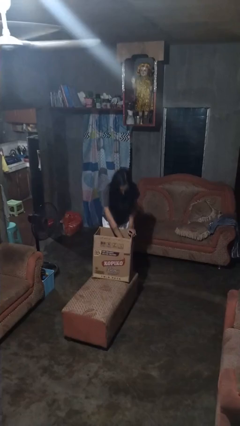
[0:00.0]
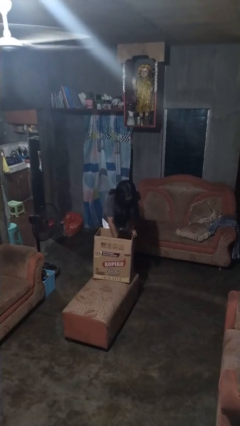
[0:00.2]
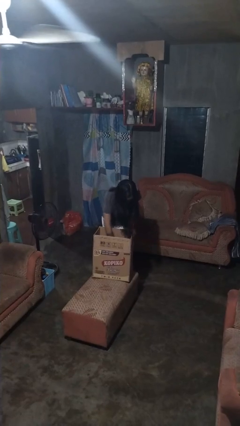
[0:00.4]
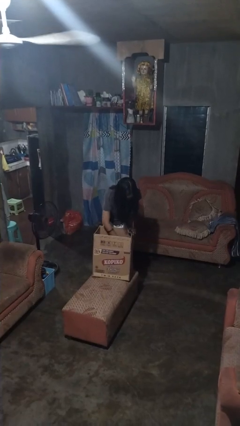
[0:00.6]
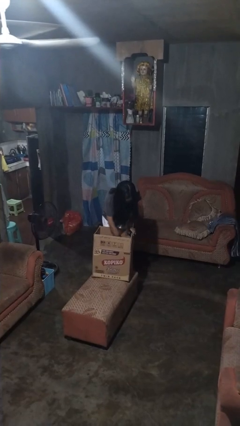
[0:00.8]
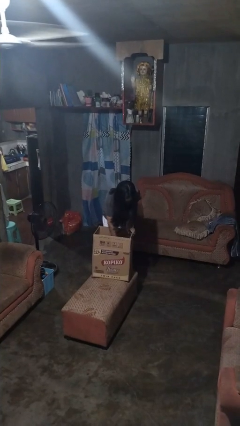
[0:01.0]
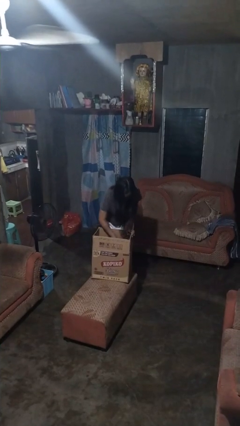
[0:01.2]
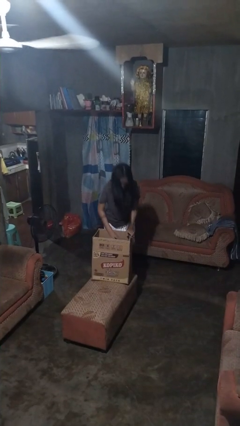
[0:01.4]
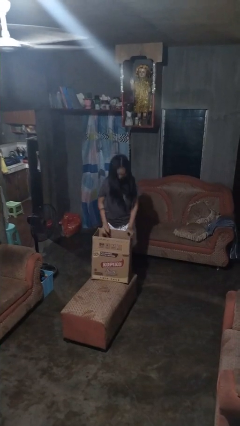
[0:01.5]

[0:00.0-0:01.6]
person searches in box

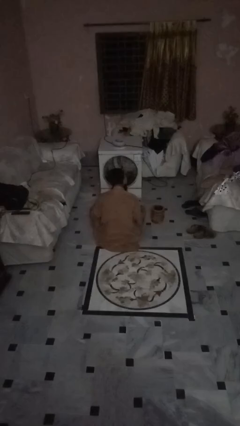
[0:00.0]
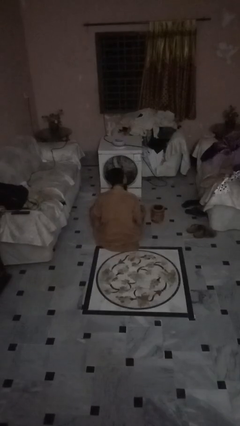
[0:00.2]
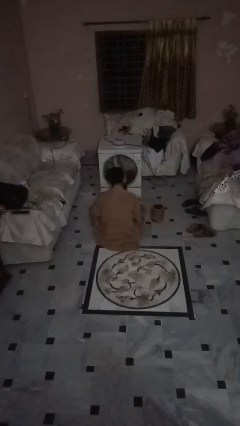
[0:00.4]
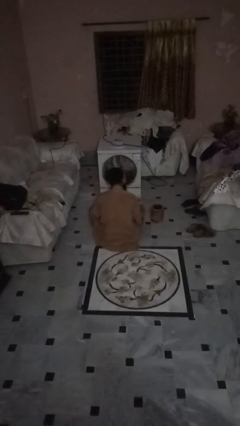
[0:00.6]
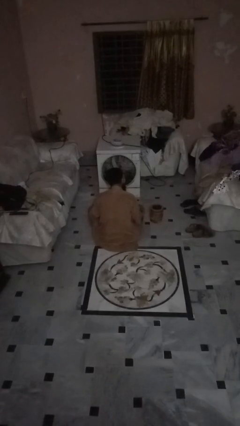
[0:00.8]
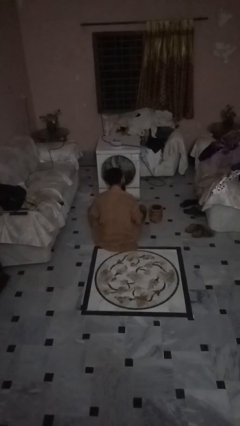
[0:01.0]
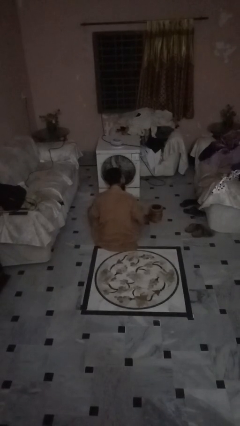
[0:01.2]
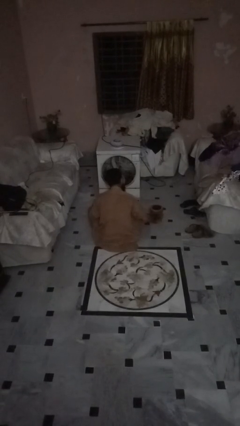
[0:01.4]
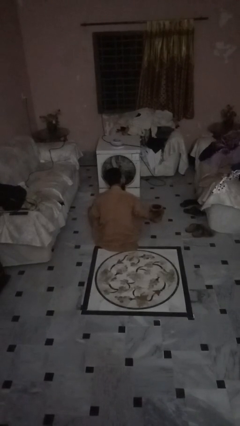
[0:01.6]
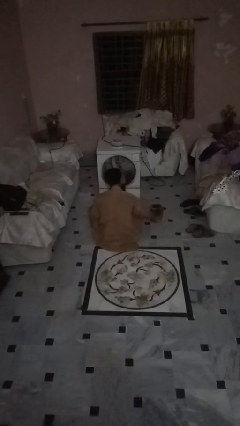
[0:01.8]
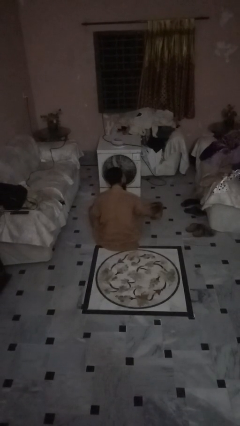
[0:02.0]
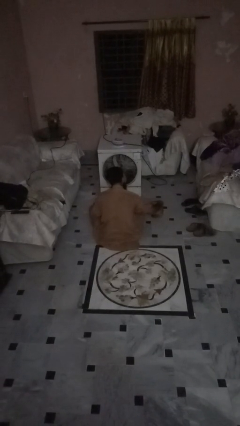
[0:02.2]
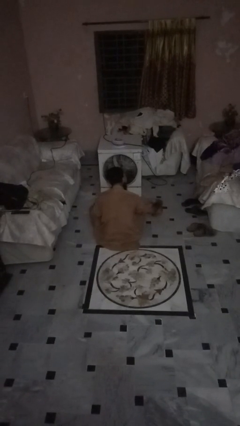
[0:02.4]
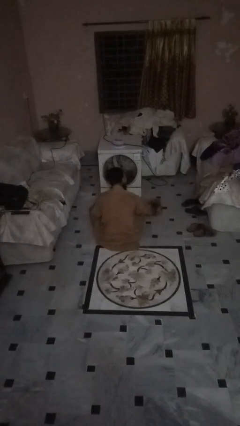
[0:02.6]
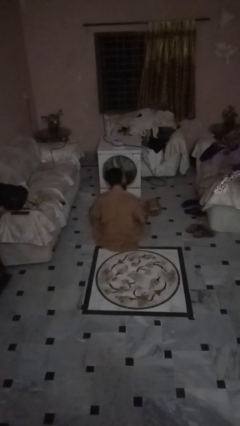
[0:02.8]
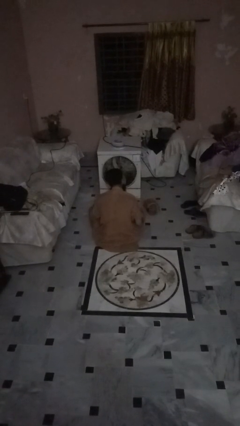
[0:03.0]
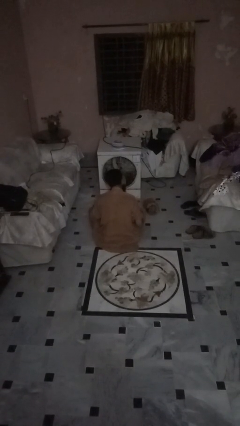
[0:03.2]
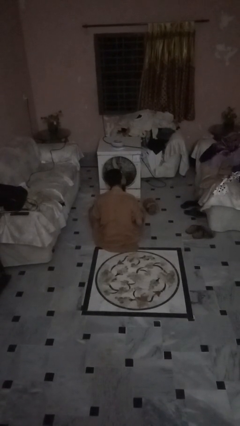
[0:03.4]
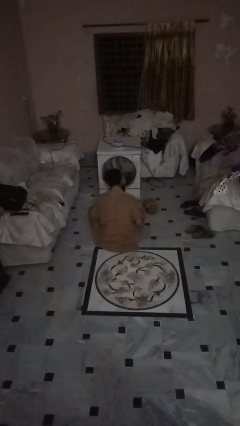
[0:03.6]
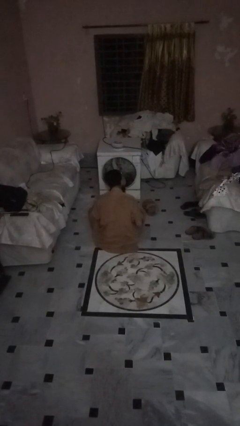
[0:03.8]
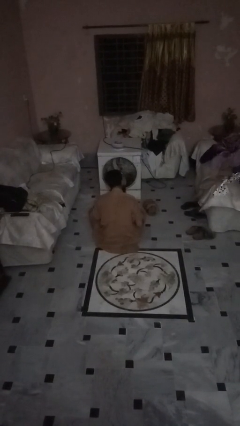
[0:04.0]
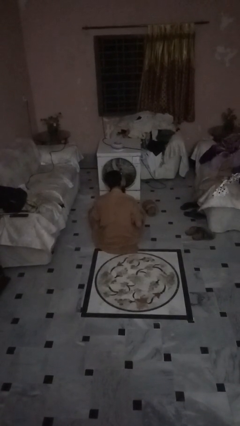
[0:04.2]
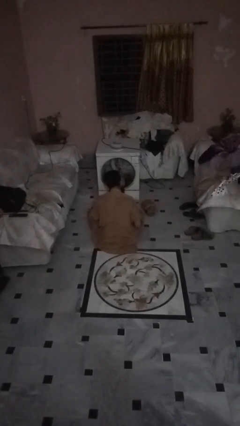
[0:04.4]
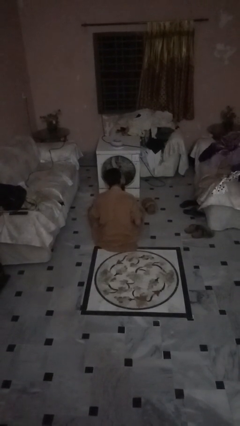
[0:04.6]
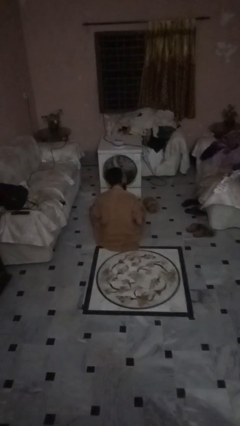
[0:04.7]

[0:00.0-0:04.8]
person knocks over furniture

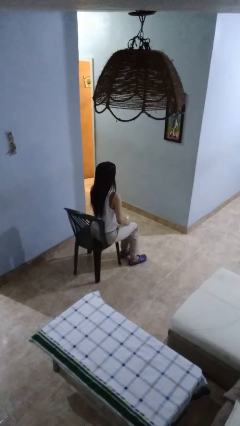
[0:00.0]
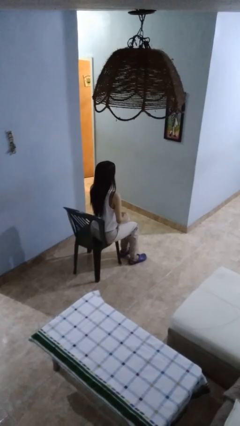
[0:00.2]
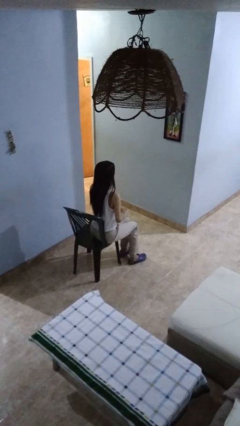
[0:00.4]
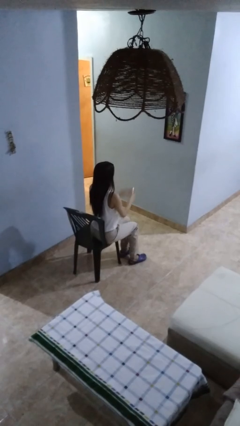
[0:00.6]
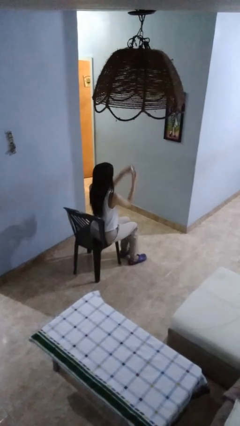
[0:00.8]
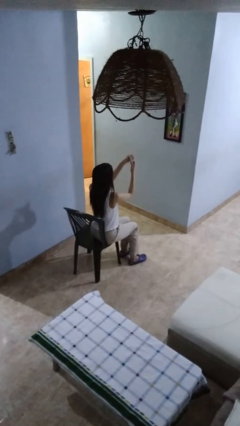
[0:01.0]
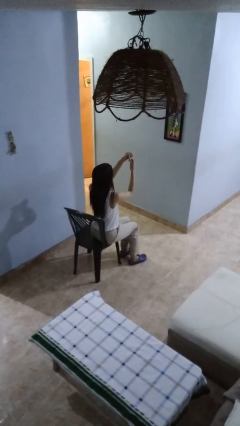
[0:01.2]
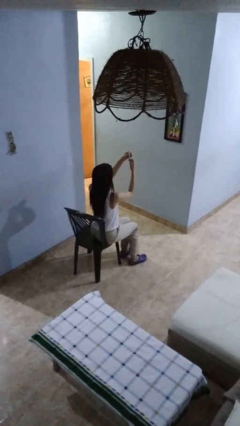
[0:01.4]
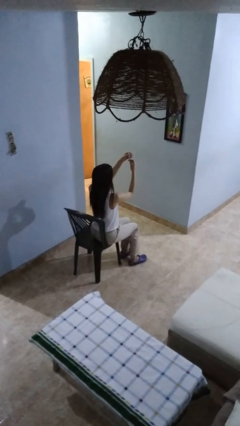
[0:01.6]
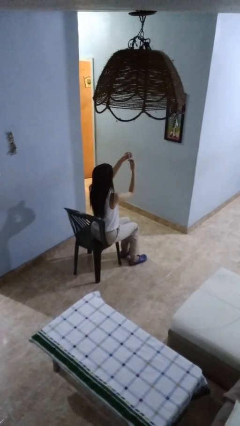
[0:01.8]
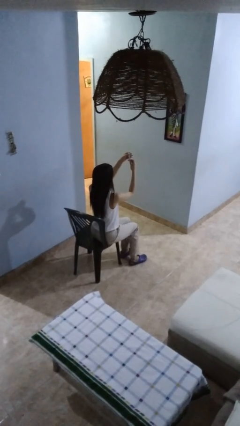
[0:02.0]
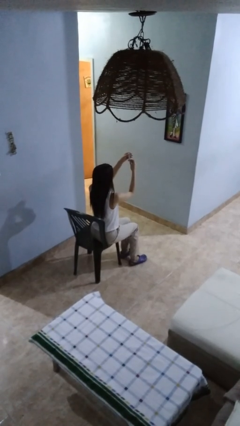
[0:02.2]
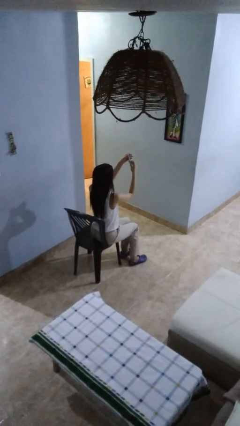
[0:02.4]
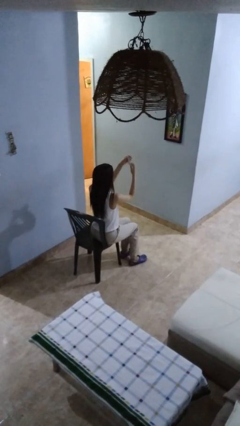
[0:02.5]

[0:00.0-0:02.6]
person clips fingernails

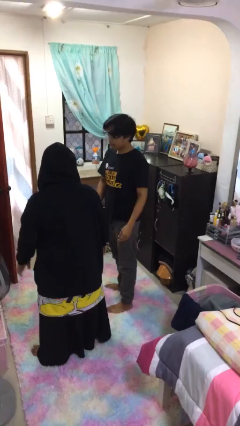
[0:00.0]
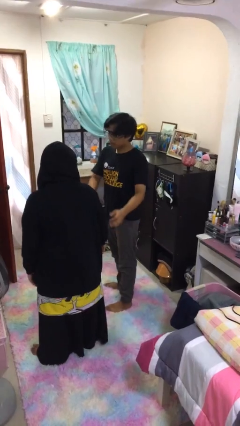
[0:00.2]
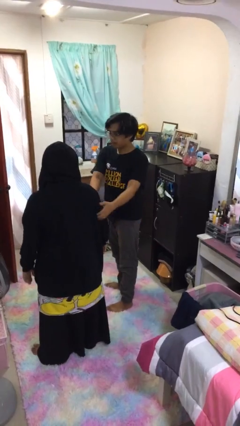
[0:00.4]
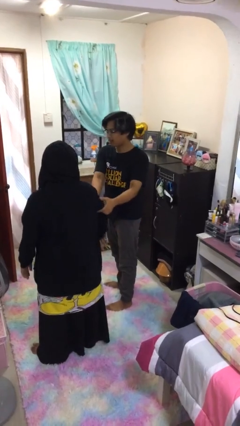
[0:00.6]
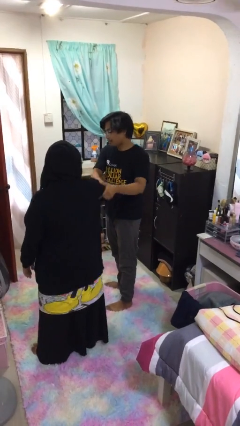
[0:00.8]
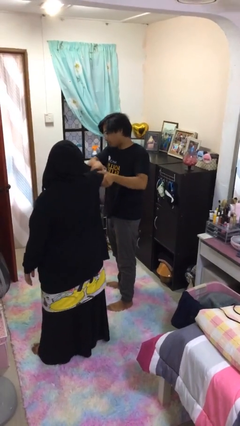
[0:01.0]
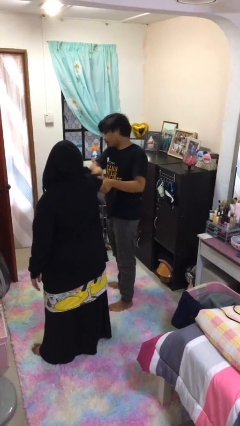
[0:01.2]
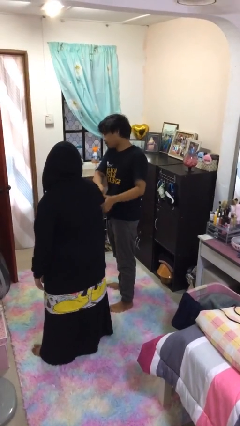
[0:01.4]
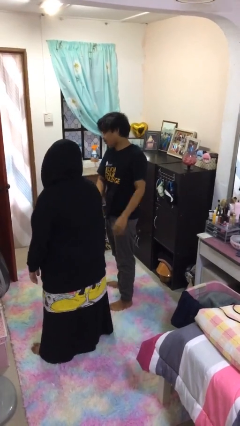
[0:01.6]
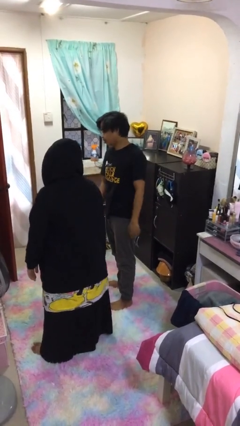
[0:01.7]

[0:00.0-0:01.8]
person grabs person by bicep

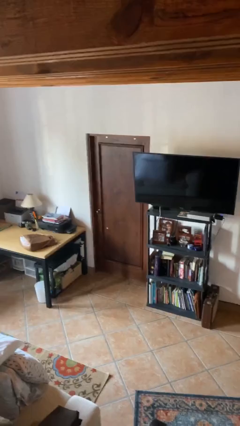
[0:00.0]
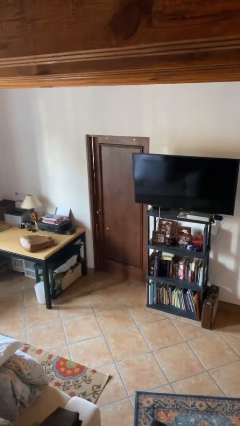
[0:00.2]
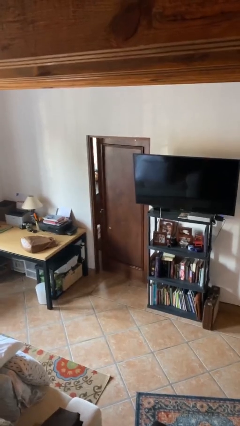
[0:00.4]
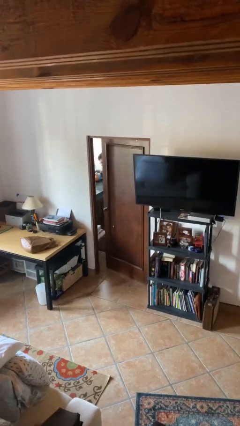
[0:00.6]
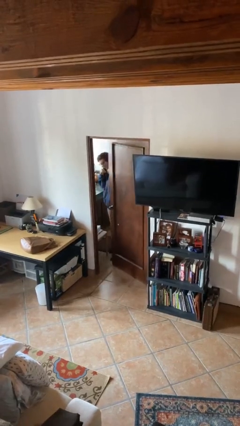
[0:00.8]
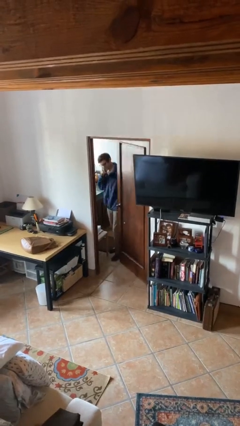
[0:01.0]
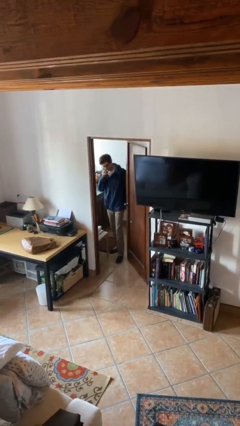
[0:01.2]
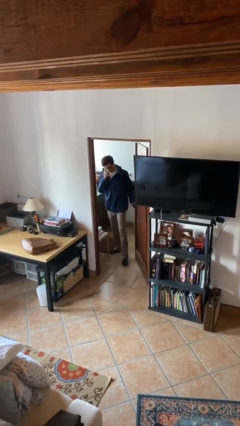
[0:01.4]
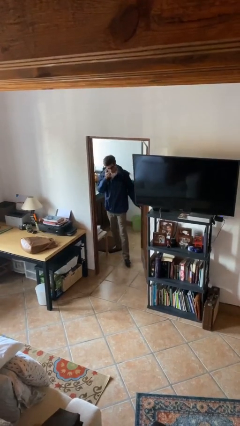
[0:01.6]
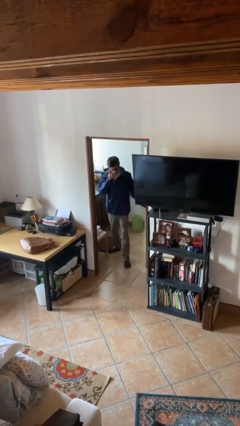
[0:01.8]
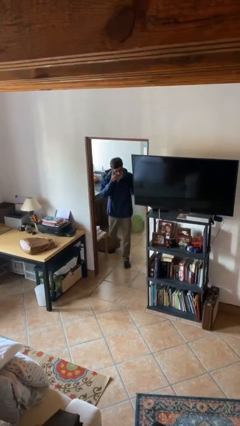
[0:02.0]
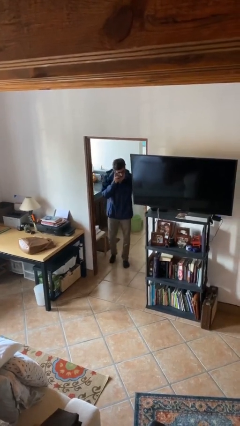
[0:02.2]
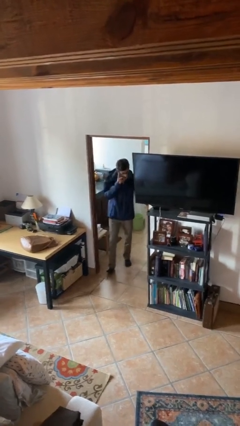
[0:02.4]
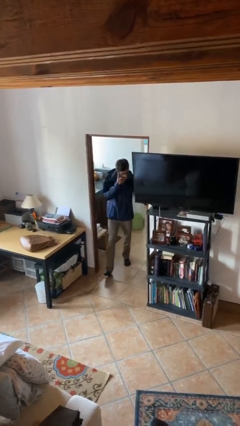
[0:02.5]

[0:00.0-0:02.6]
person opens facility door

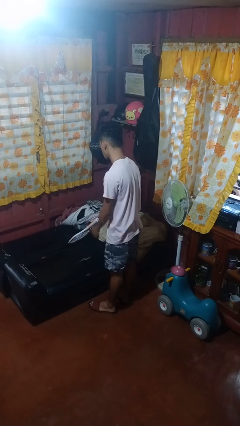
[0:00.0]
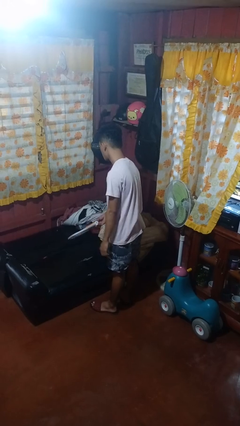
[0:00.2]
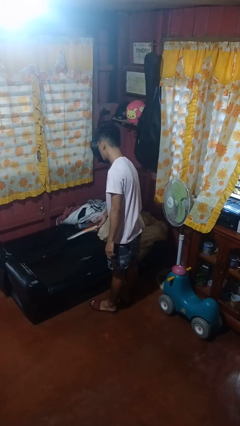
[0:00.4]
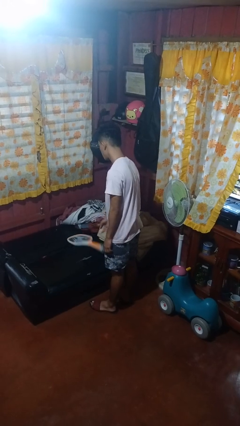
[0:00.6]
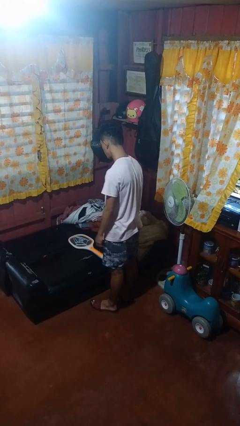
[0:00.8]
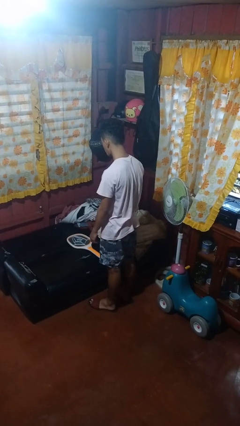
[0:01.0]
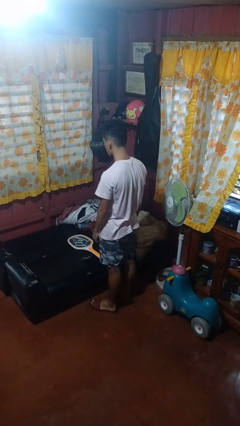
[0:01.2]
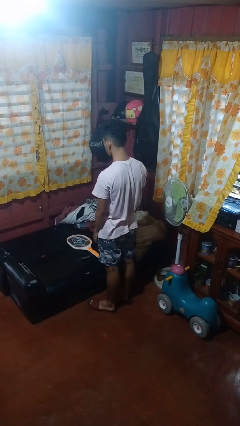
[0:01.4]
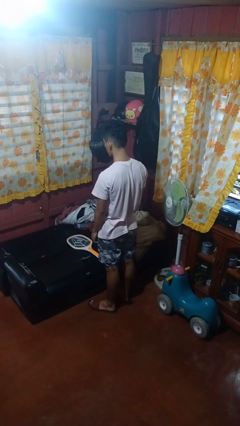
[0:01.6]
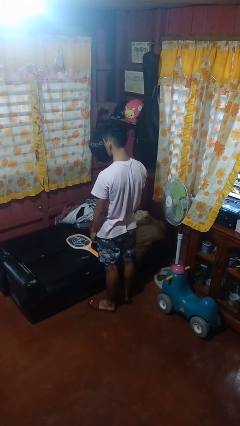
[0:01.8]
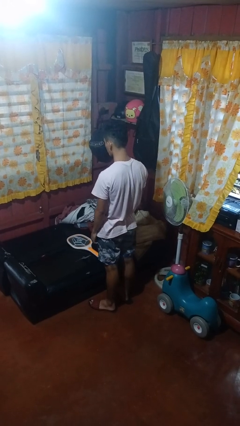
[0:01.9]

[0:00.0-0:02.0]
person puts down object on couch

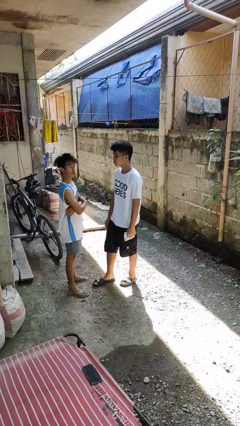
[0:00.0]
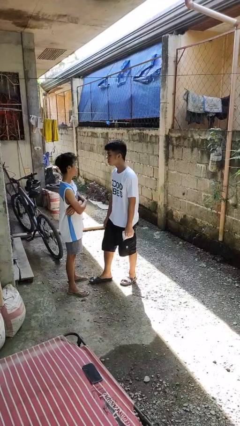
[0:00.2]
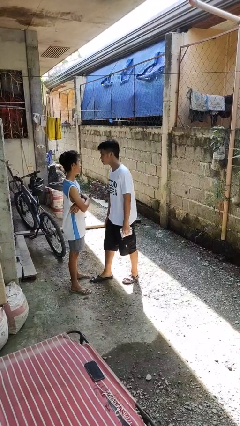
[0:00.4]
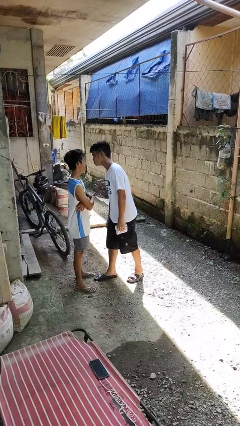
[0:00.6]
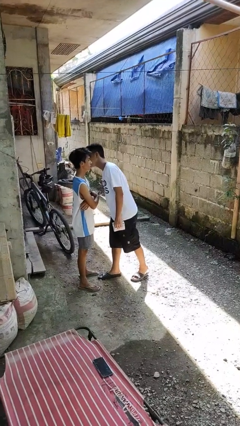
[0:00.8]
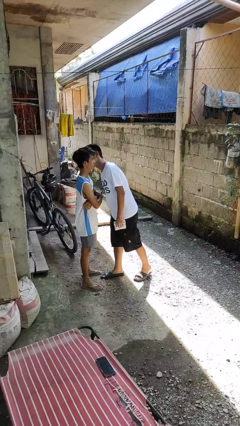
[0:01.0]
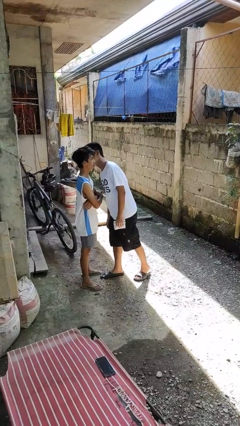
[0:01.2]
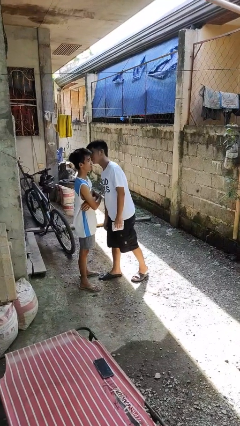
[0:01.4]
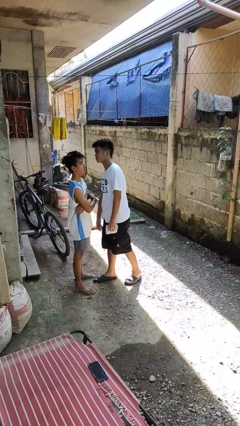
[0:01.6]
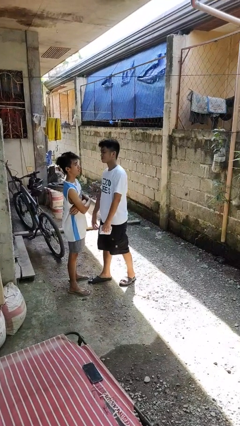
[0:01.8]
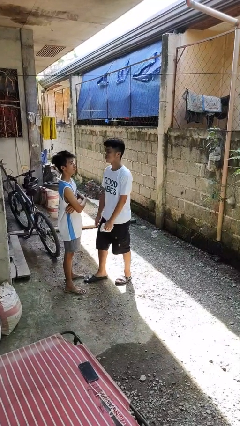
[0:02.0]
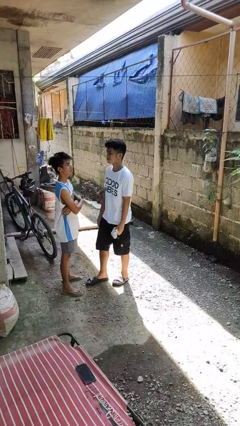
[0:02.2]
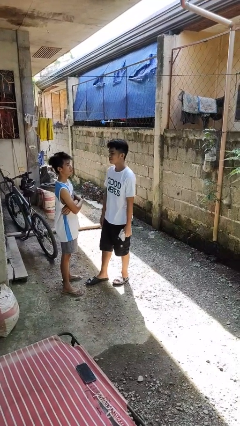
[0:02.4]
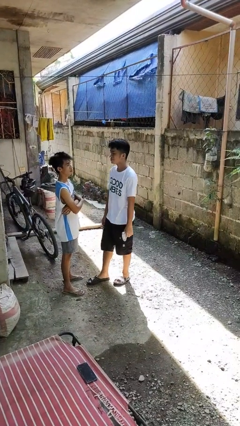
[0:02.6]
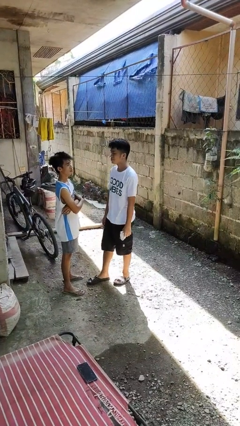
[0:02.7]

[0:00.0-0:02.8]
person kisses cheek of person
